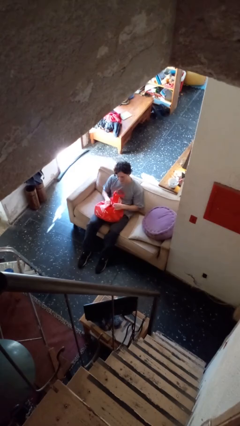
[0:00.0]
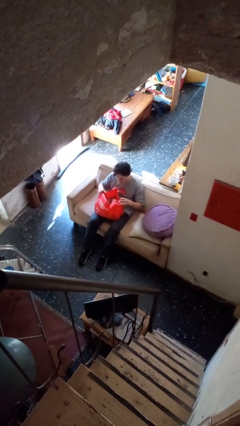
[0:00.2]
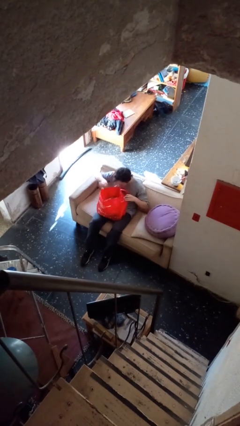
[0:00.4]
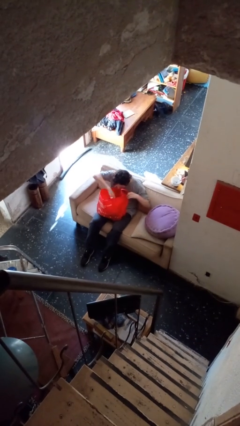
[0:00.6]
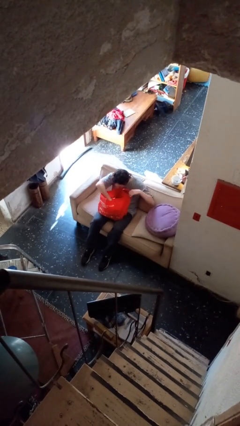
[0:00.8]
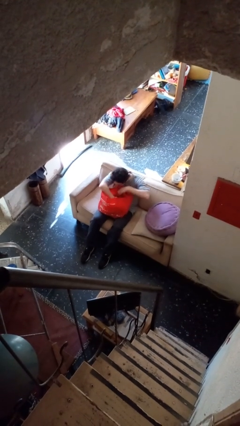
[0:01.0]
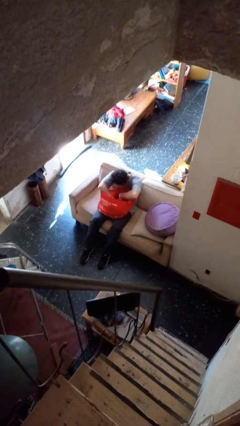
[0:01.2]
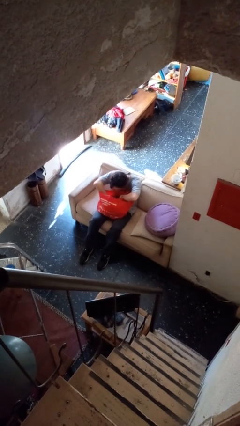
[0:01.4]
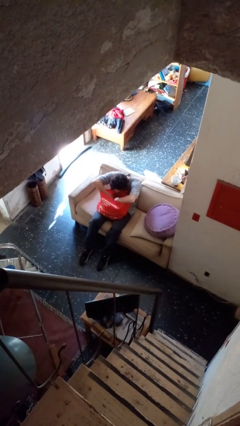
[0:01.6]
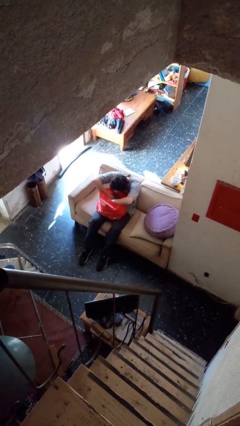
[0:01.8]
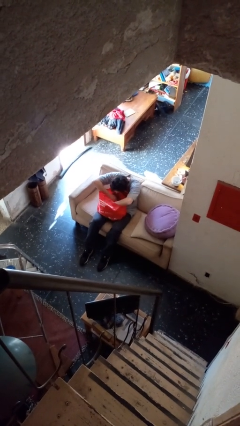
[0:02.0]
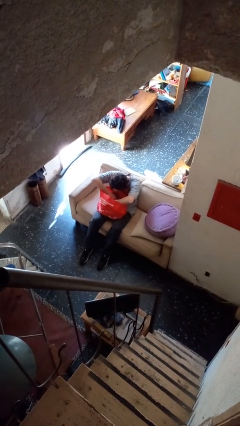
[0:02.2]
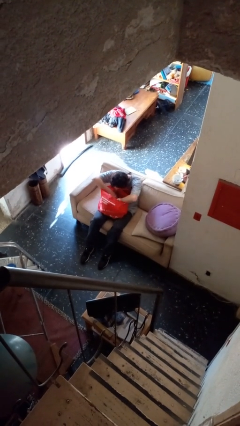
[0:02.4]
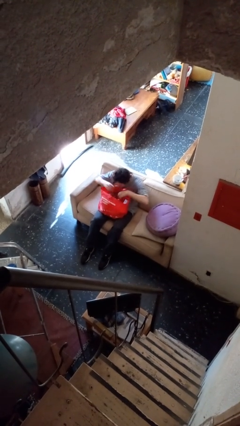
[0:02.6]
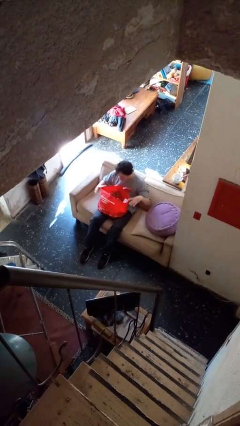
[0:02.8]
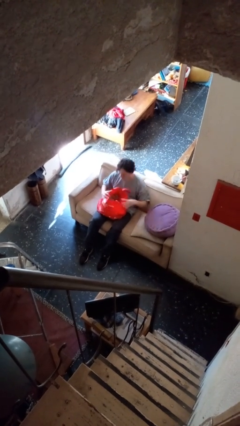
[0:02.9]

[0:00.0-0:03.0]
person searches in bag

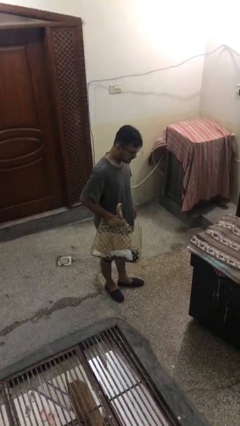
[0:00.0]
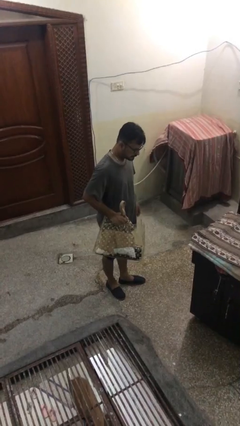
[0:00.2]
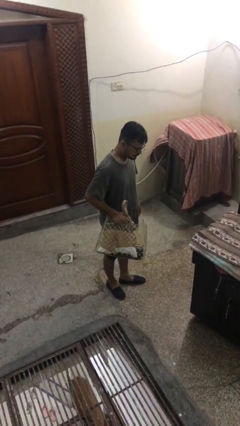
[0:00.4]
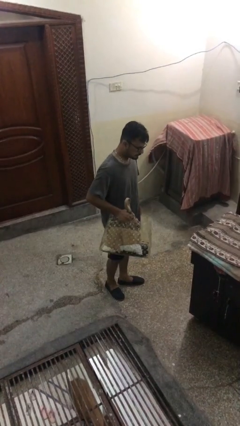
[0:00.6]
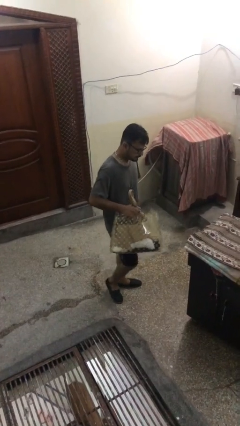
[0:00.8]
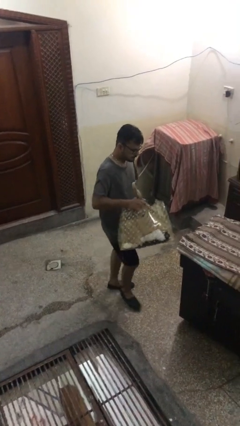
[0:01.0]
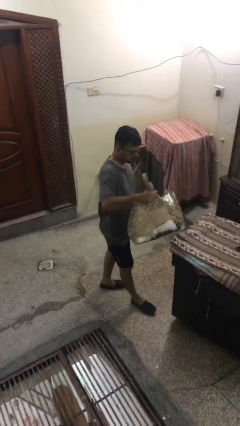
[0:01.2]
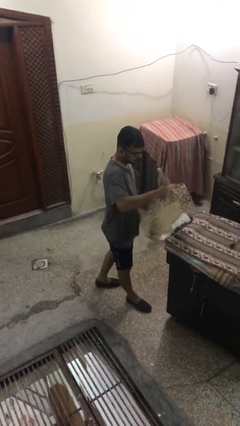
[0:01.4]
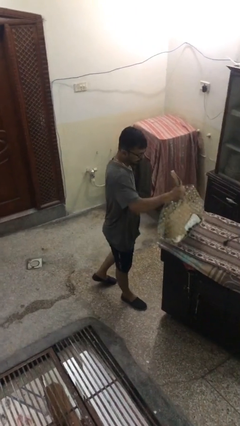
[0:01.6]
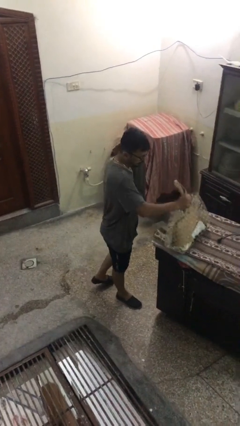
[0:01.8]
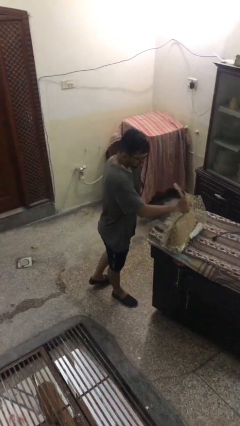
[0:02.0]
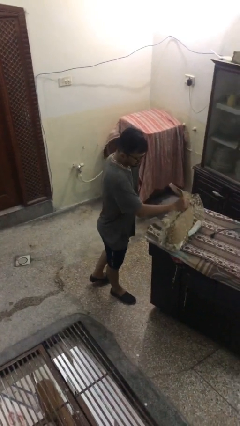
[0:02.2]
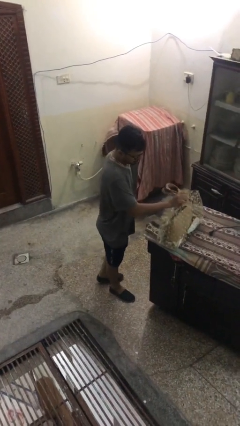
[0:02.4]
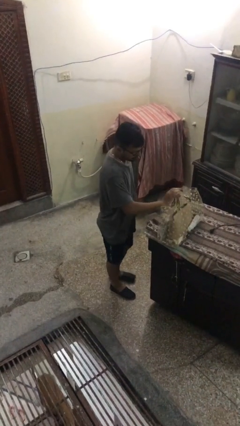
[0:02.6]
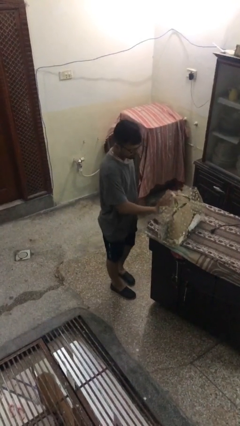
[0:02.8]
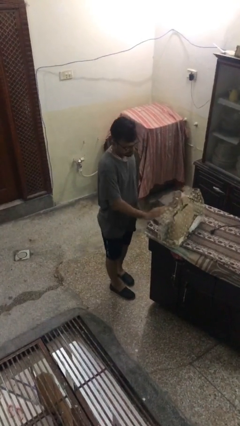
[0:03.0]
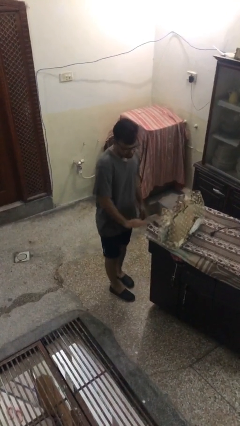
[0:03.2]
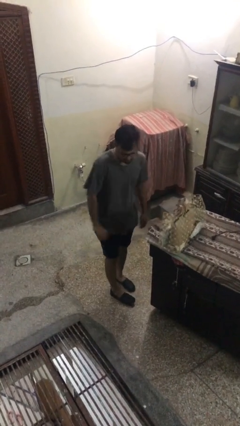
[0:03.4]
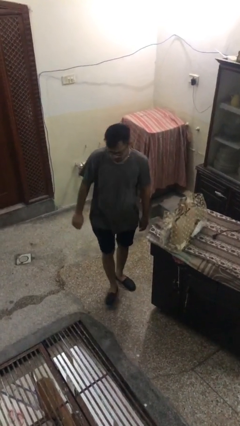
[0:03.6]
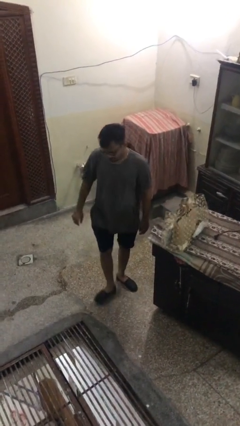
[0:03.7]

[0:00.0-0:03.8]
person puts down object on table

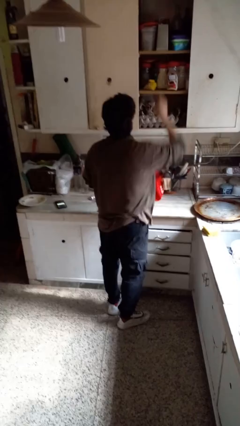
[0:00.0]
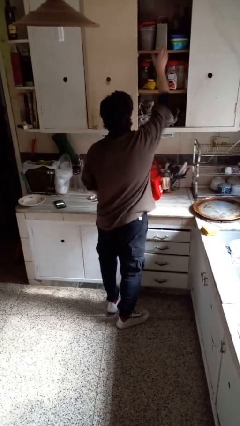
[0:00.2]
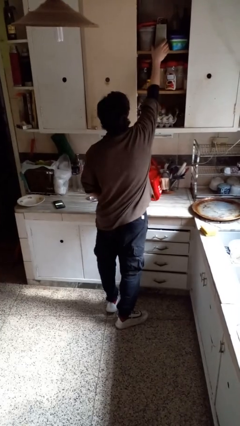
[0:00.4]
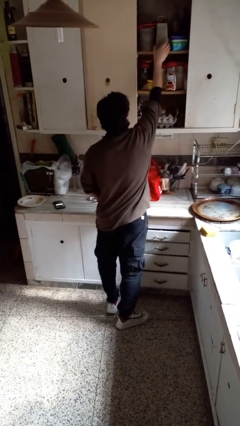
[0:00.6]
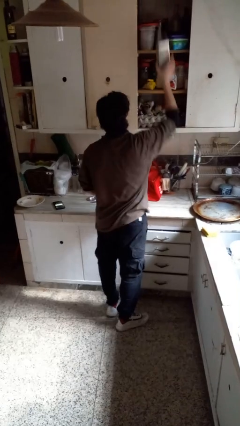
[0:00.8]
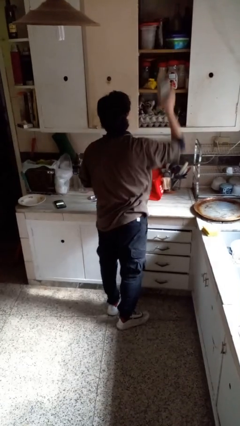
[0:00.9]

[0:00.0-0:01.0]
person puts down object into cabinet

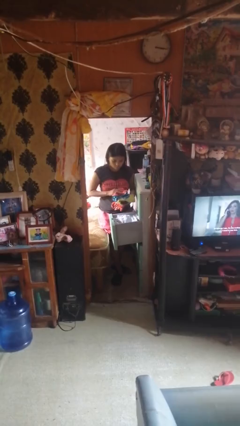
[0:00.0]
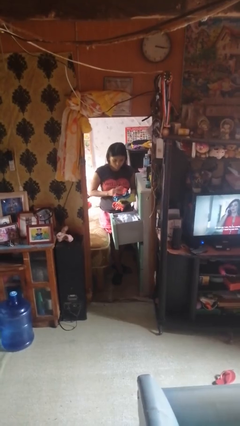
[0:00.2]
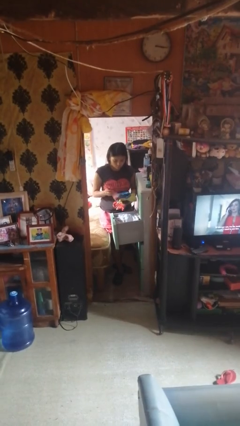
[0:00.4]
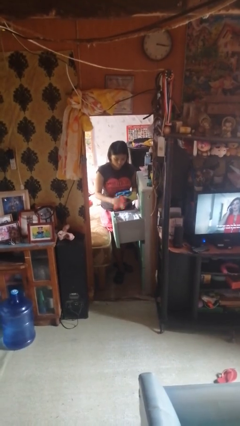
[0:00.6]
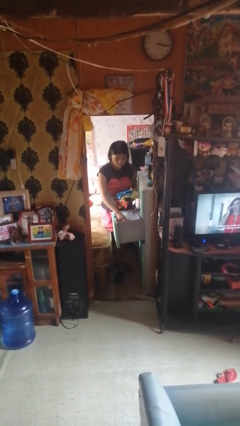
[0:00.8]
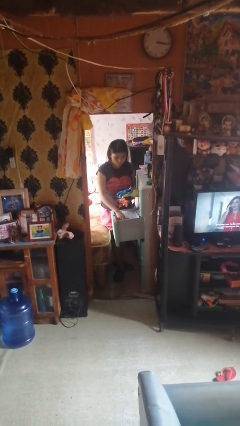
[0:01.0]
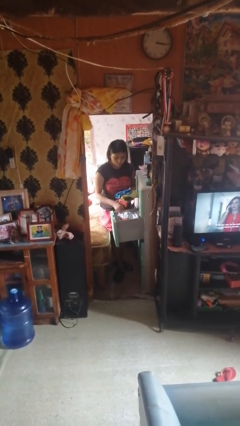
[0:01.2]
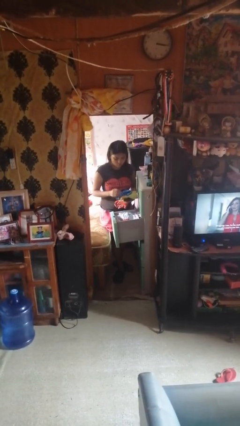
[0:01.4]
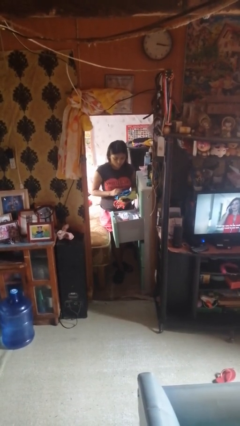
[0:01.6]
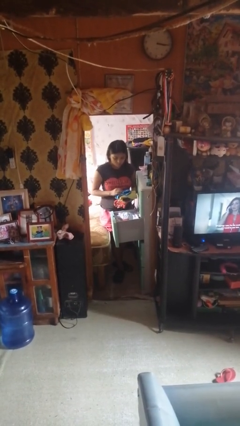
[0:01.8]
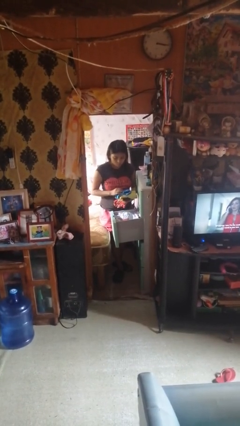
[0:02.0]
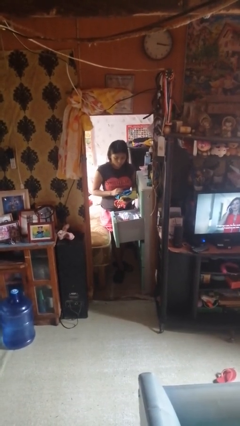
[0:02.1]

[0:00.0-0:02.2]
person puts clothes into dresser

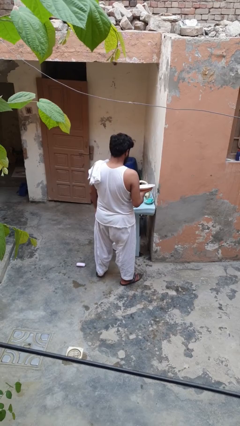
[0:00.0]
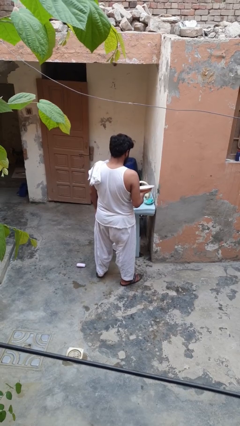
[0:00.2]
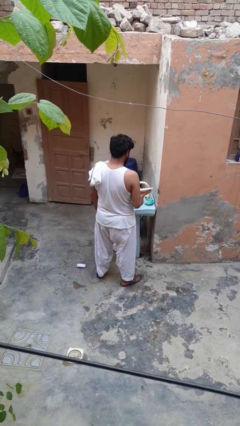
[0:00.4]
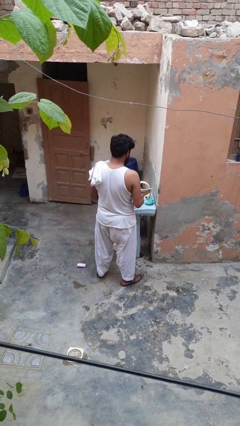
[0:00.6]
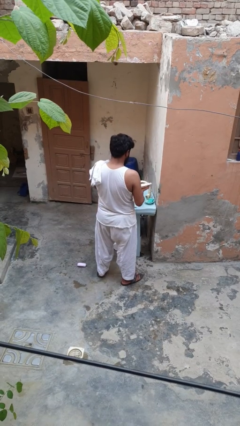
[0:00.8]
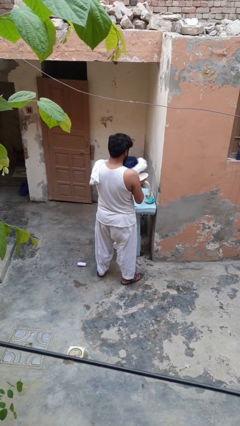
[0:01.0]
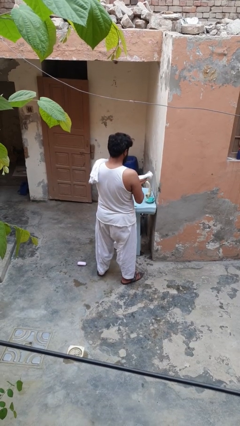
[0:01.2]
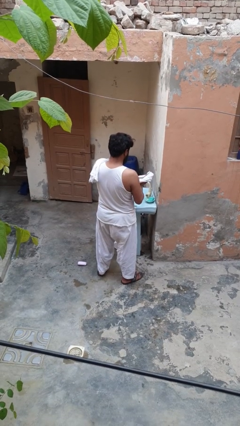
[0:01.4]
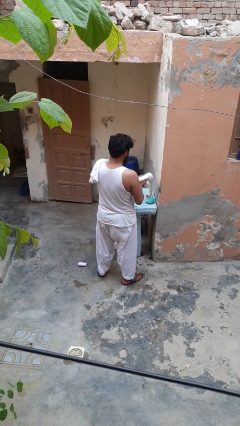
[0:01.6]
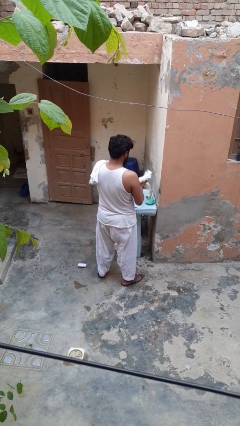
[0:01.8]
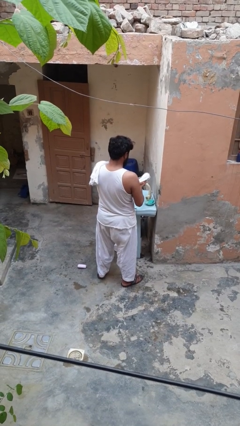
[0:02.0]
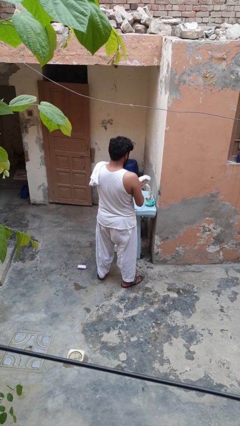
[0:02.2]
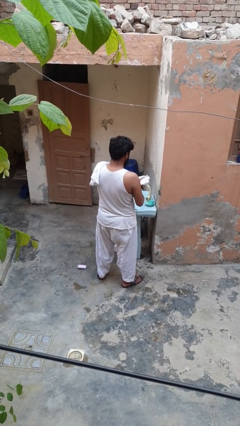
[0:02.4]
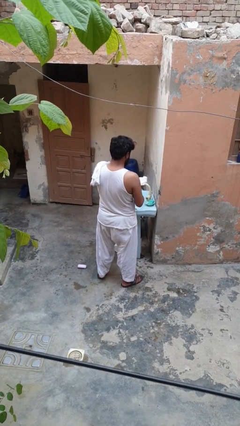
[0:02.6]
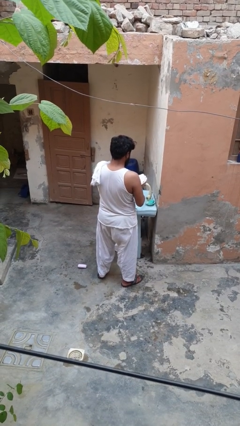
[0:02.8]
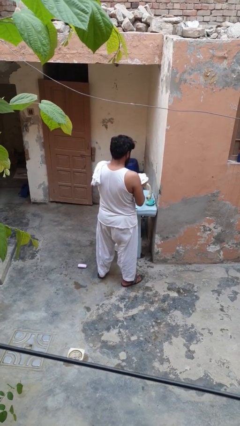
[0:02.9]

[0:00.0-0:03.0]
person dries dish

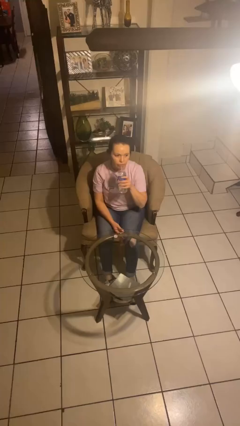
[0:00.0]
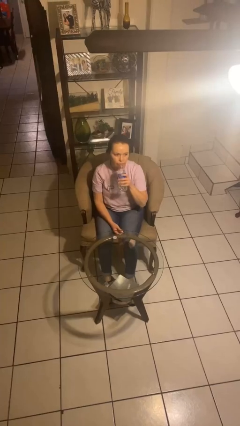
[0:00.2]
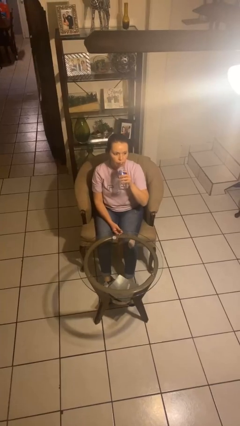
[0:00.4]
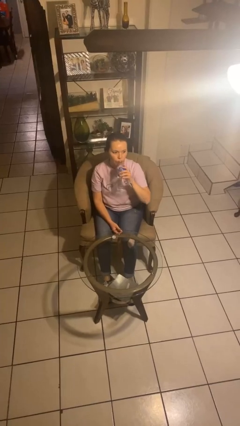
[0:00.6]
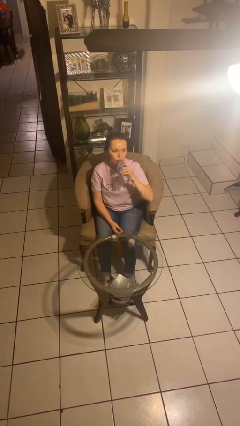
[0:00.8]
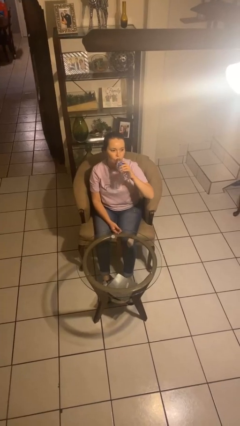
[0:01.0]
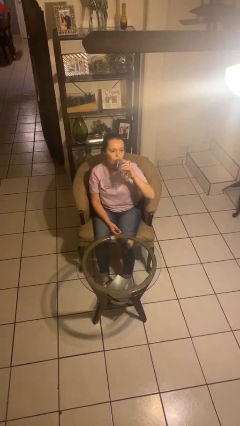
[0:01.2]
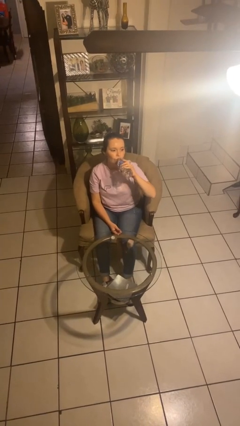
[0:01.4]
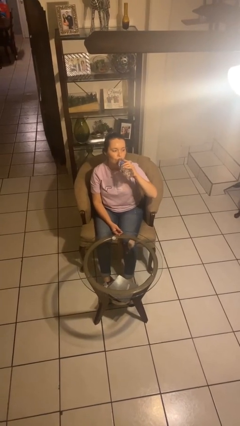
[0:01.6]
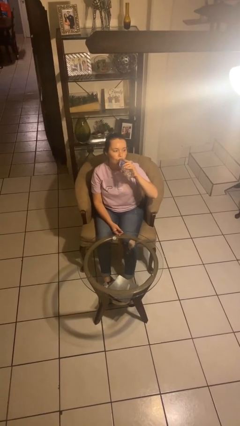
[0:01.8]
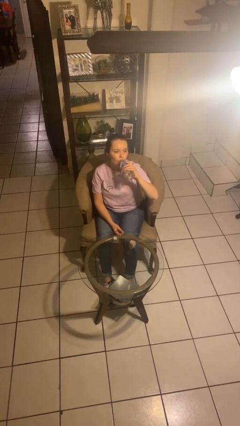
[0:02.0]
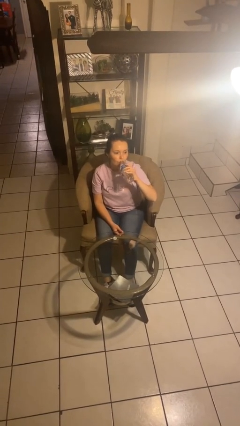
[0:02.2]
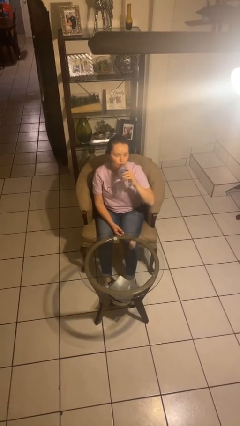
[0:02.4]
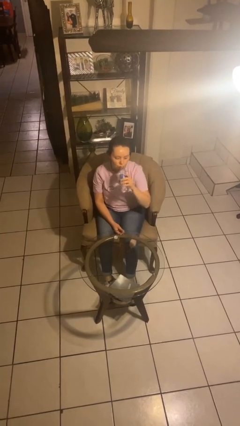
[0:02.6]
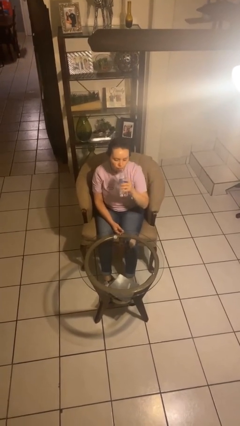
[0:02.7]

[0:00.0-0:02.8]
person drinks from bottle

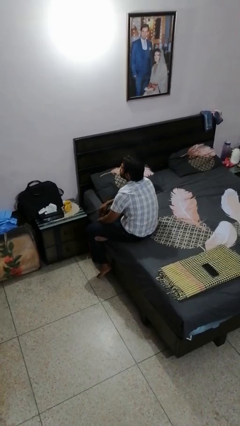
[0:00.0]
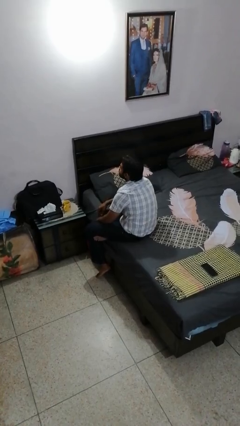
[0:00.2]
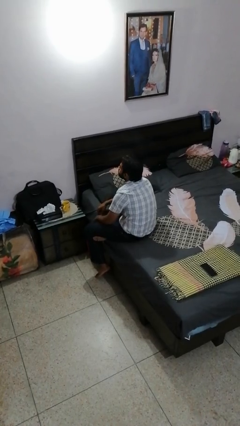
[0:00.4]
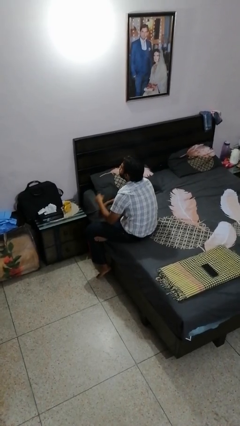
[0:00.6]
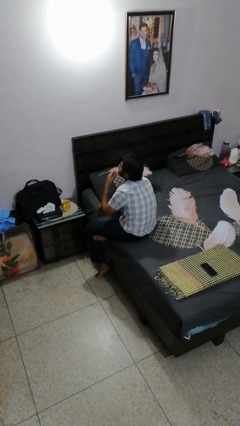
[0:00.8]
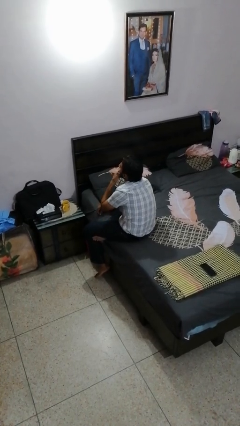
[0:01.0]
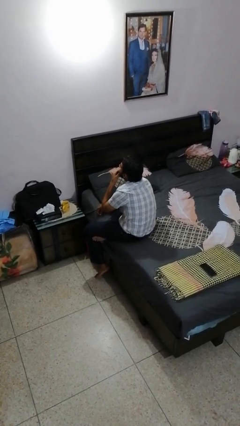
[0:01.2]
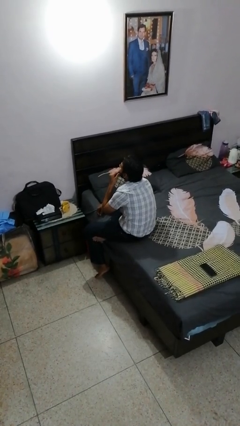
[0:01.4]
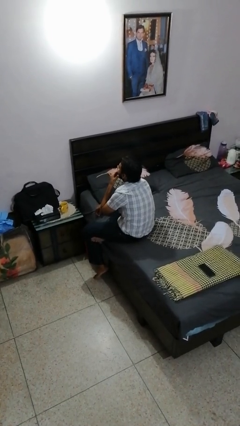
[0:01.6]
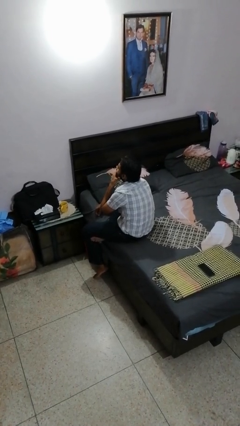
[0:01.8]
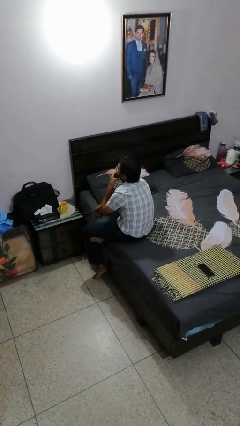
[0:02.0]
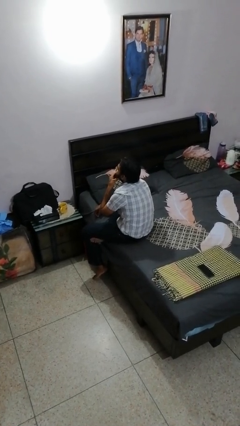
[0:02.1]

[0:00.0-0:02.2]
person strokes chin
